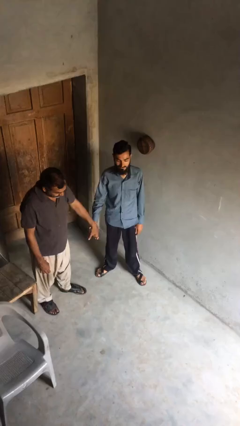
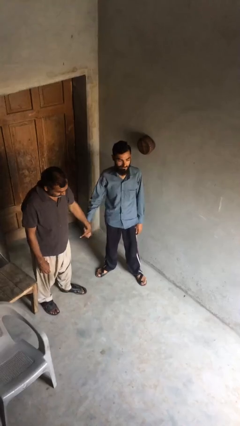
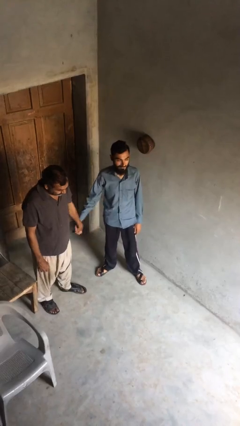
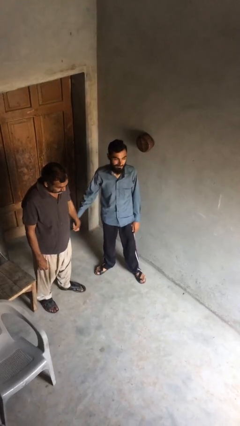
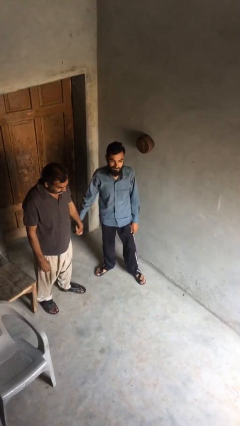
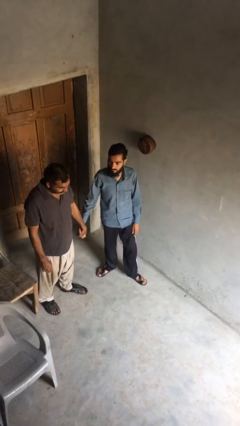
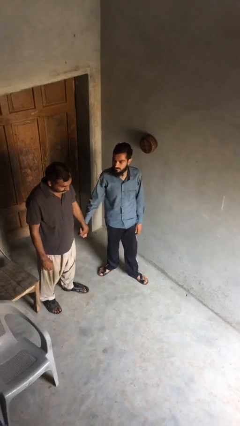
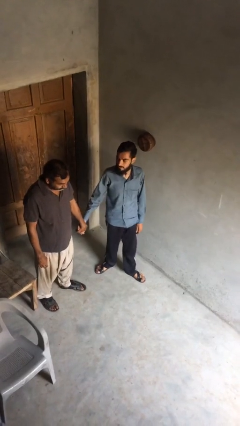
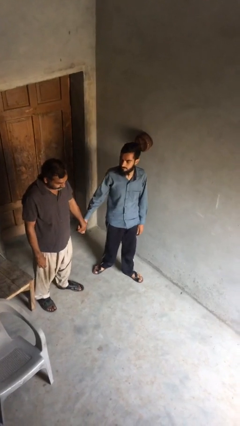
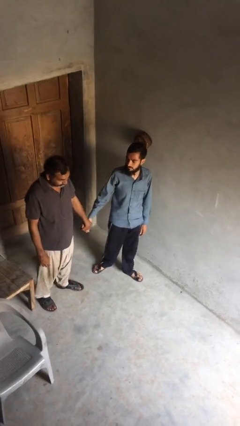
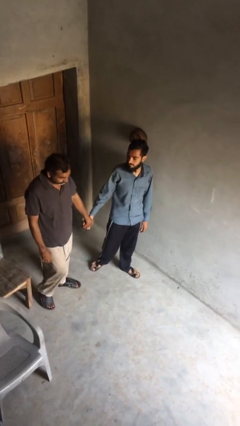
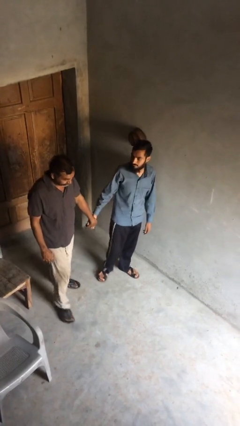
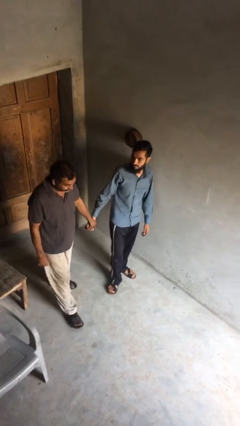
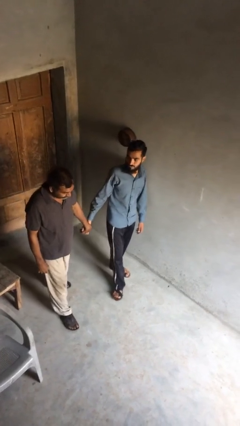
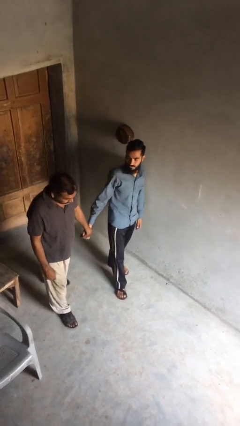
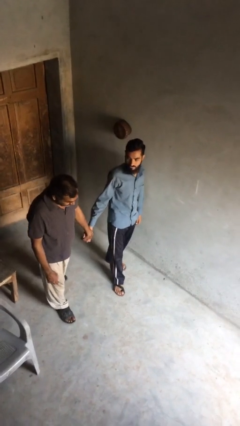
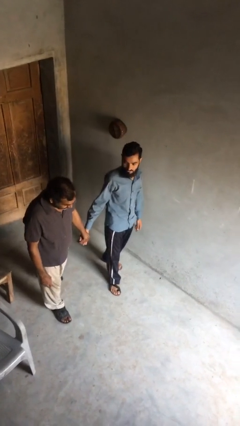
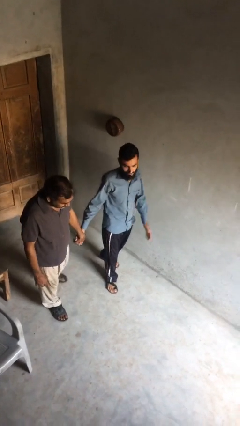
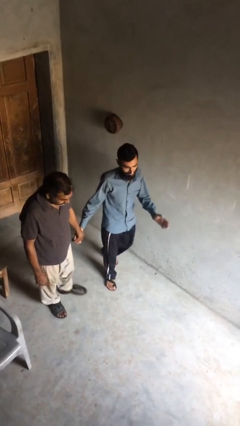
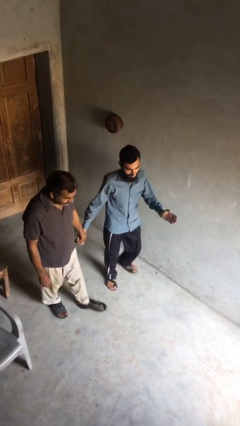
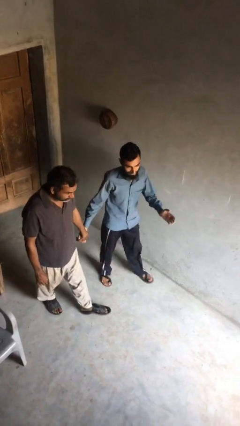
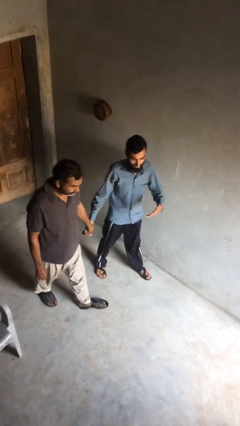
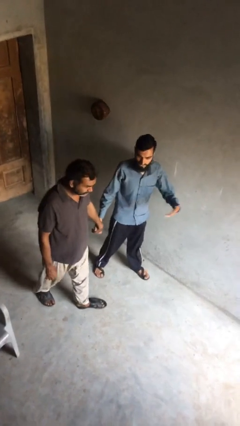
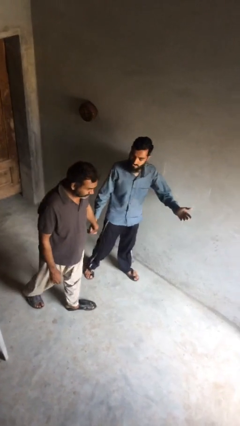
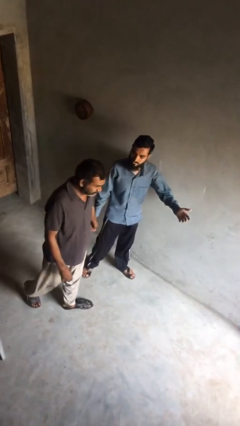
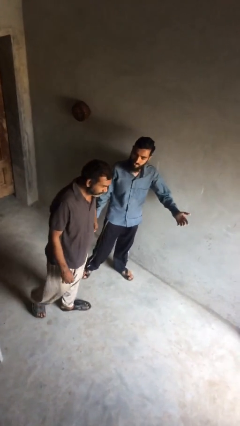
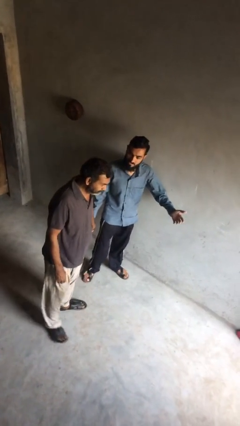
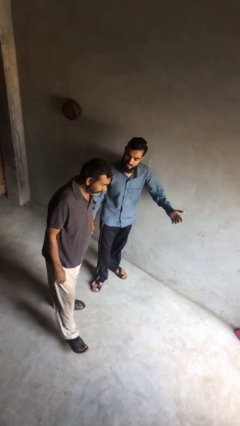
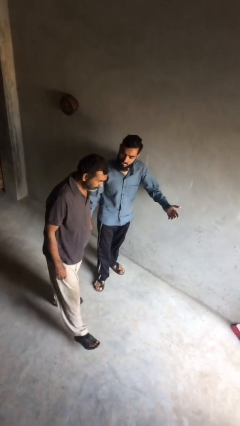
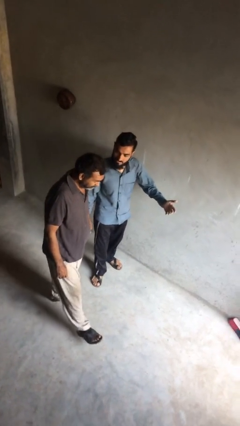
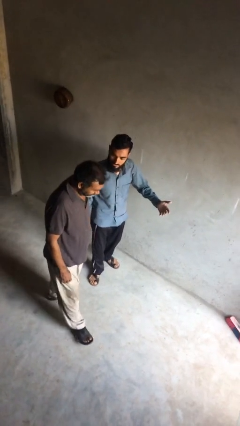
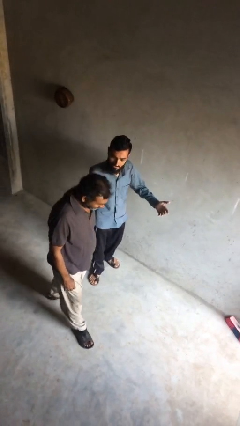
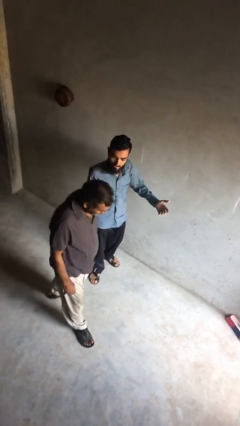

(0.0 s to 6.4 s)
person holds hand

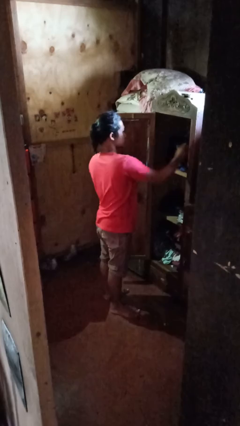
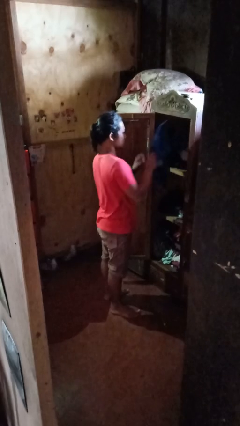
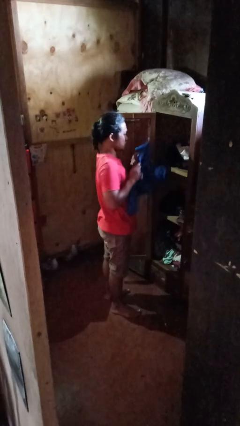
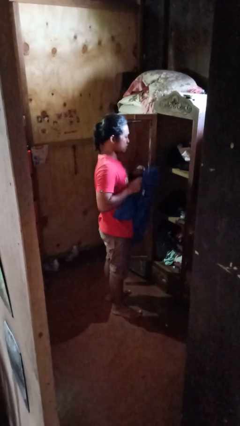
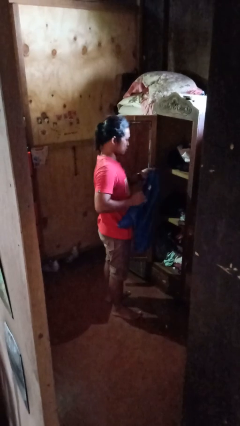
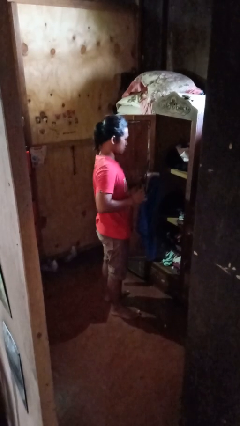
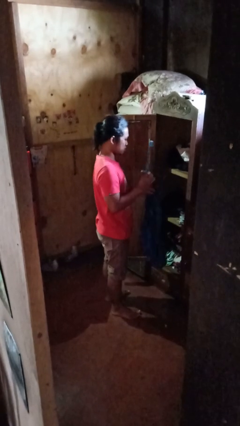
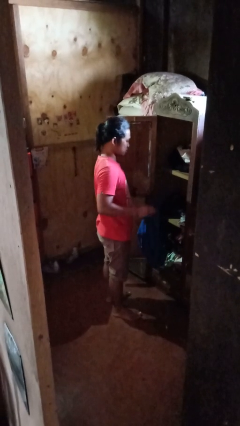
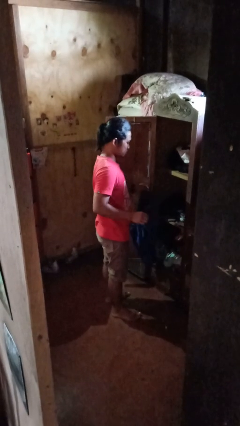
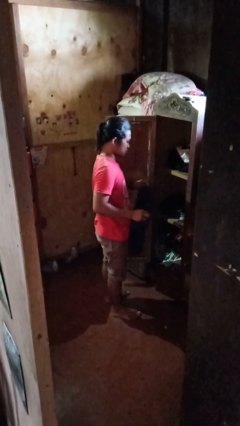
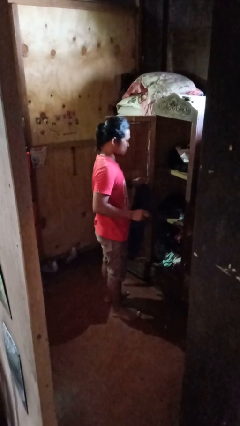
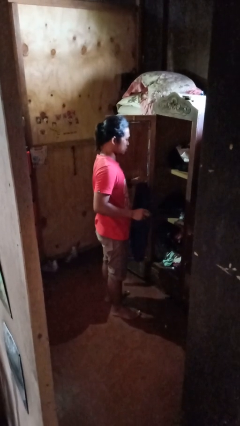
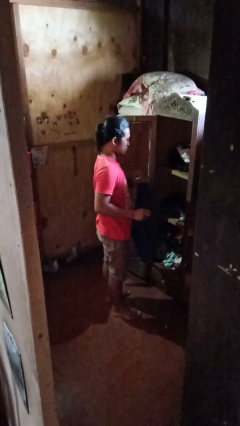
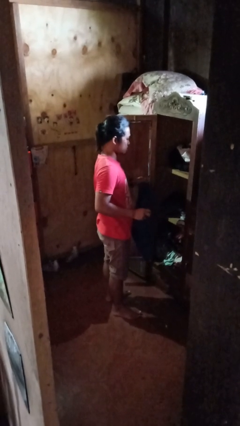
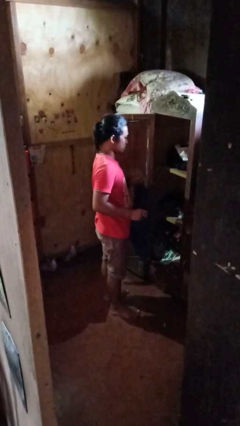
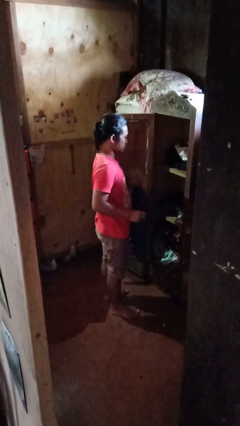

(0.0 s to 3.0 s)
person takes clothes from closet

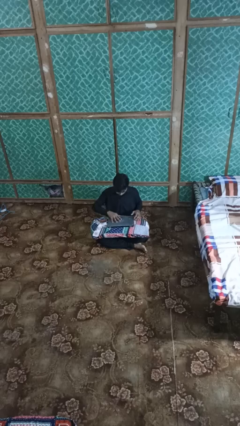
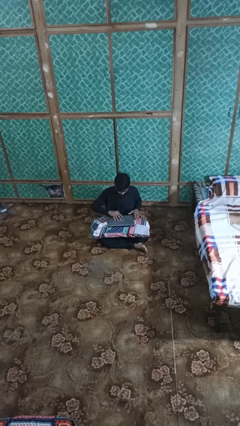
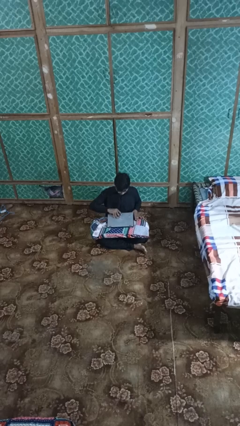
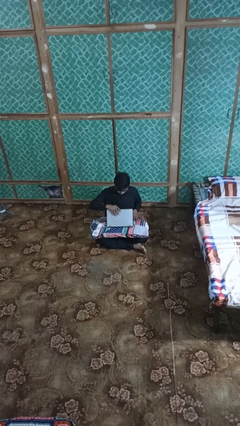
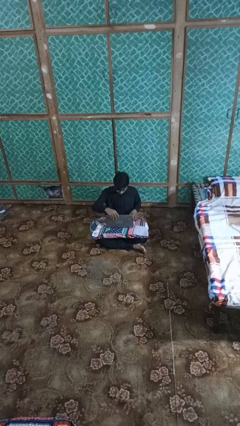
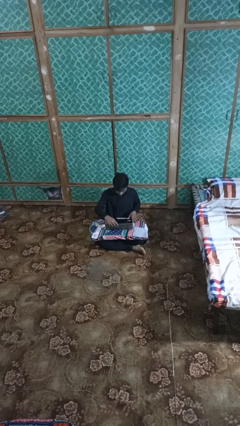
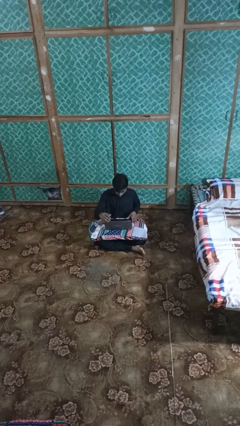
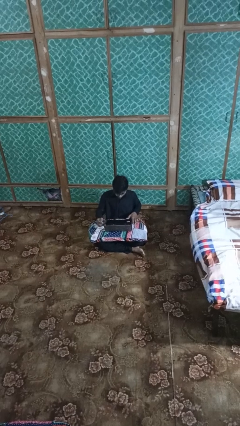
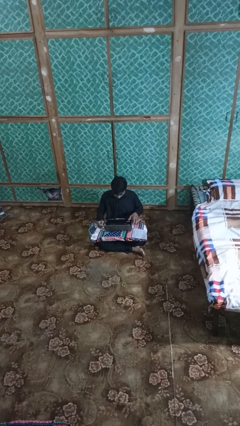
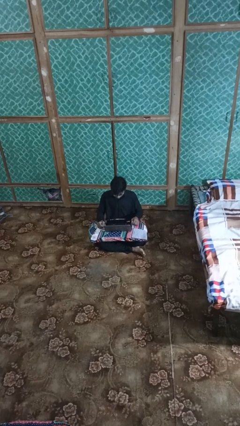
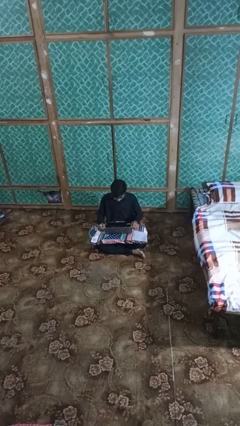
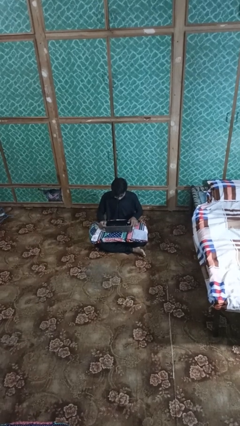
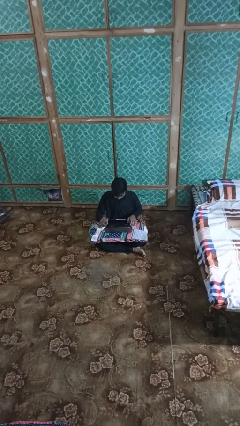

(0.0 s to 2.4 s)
person opens laptop

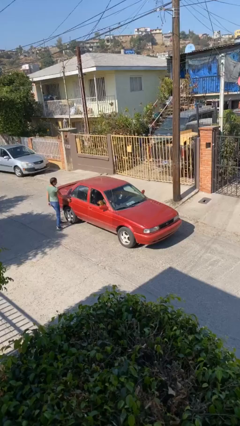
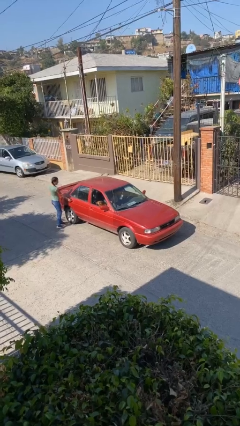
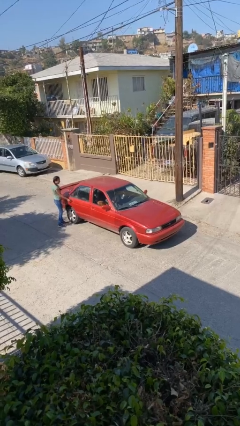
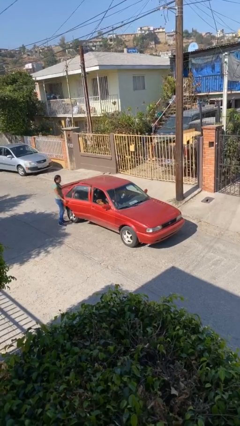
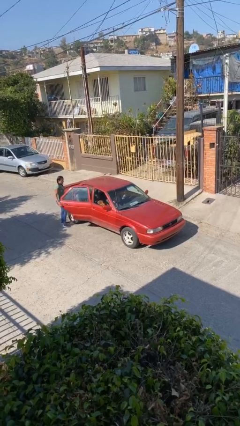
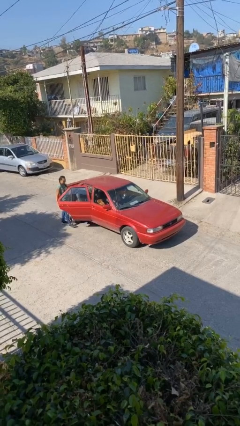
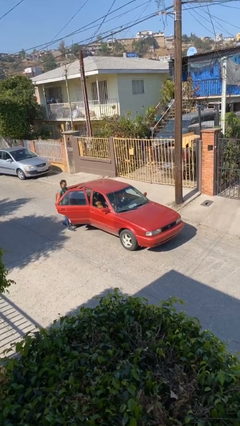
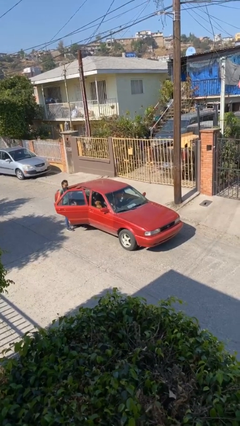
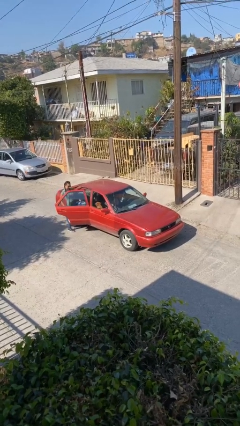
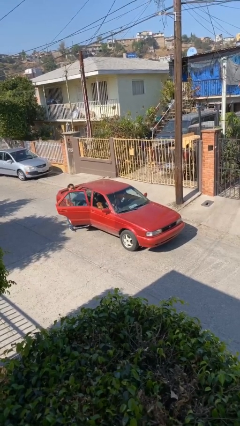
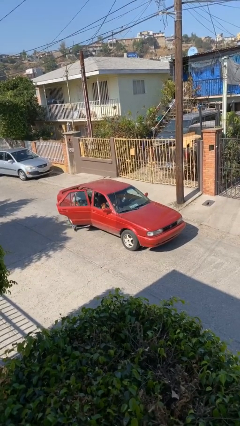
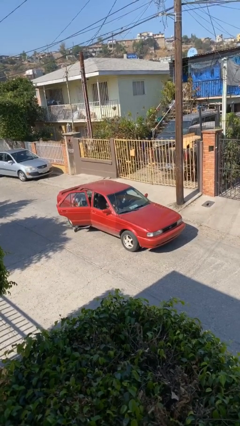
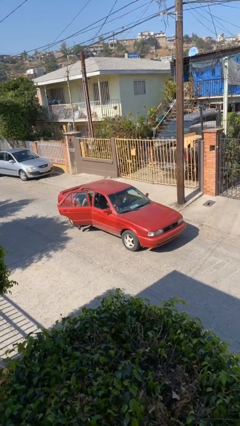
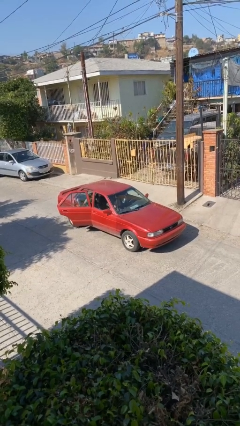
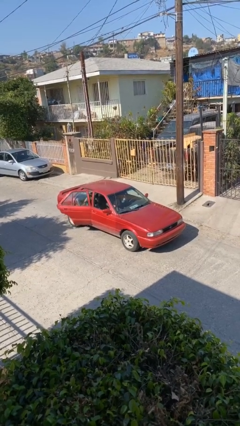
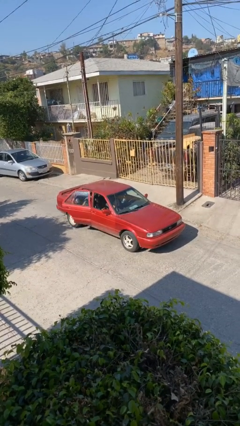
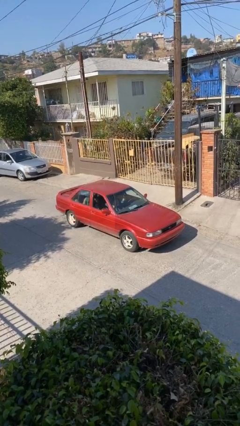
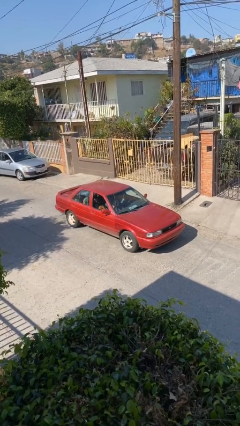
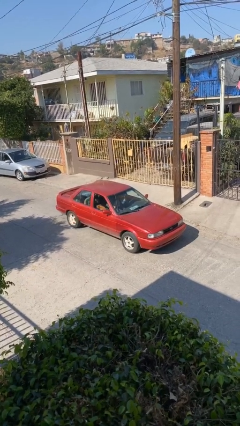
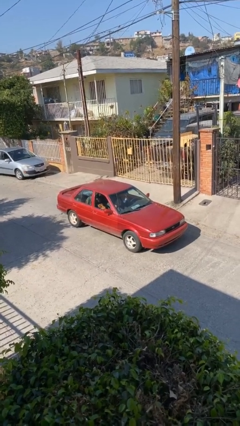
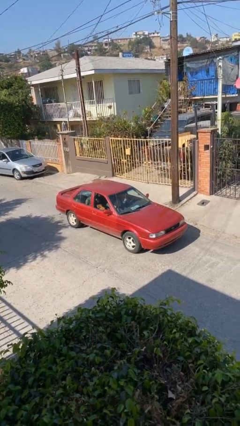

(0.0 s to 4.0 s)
car picks up person

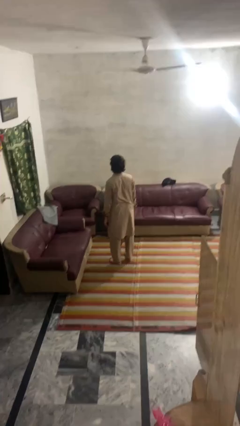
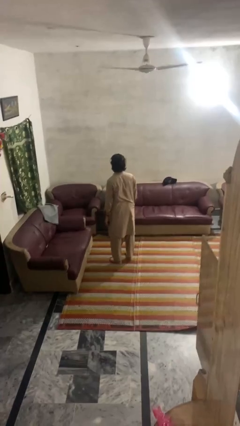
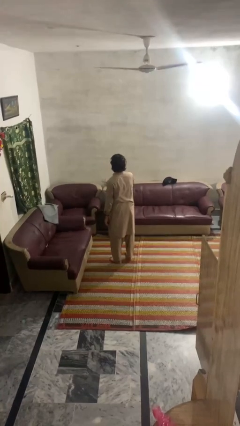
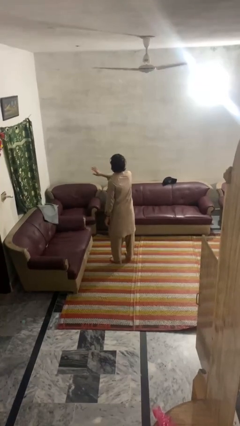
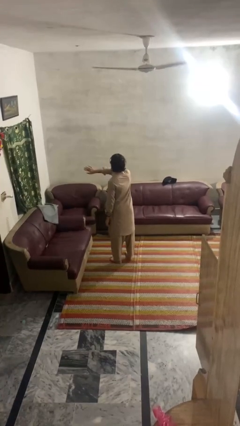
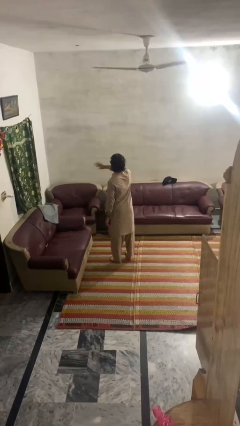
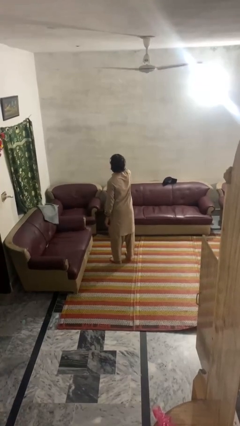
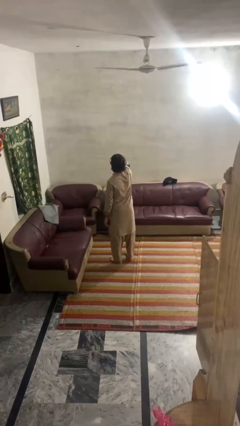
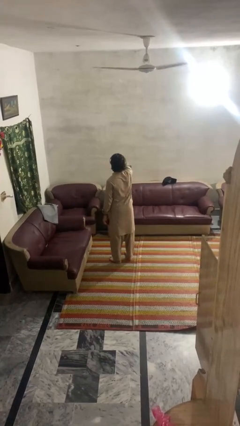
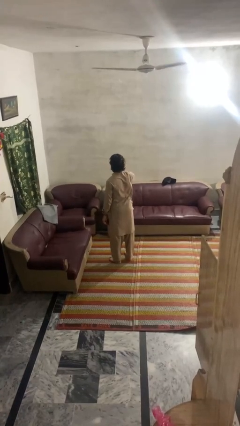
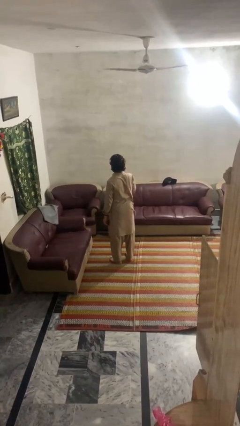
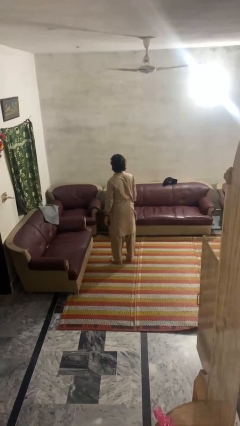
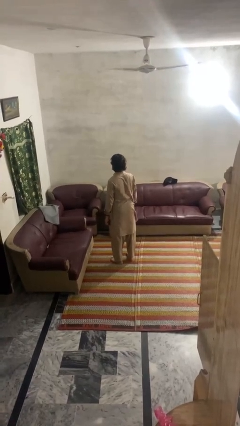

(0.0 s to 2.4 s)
person gestures swipe right
